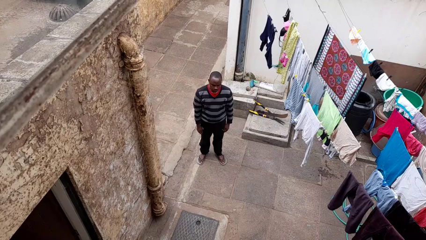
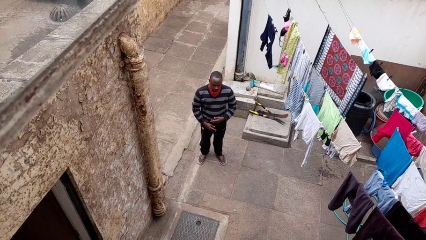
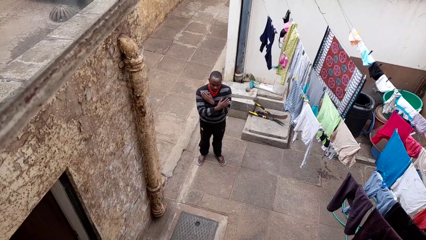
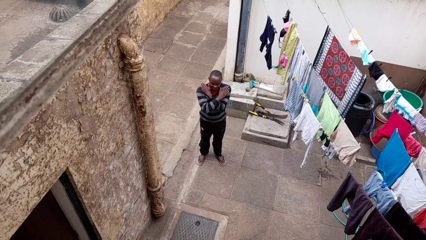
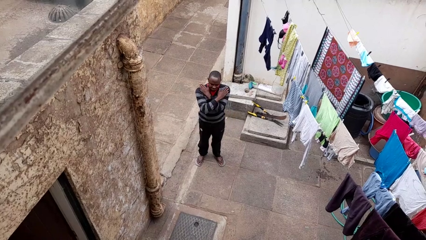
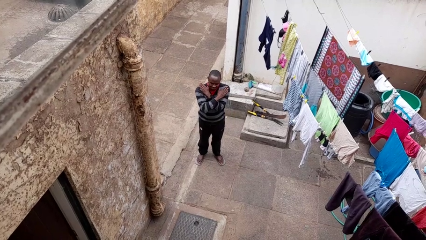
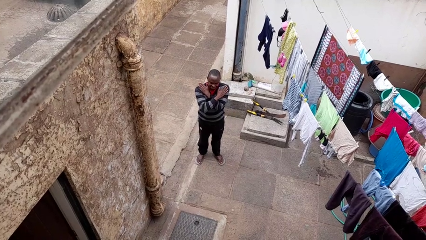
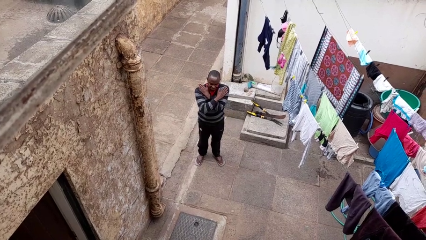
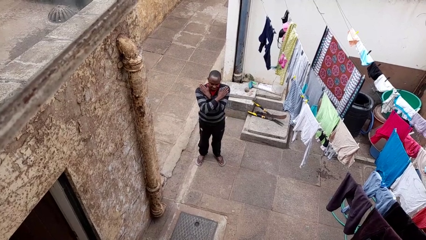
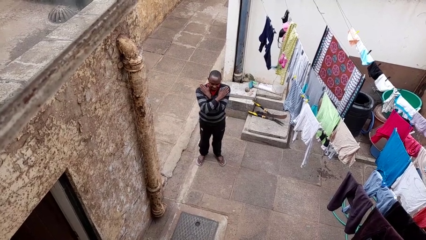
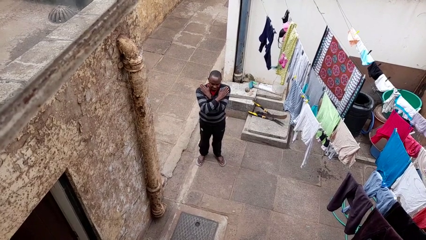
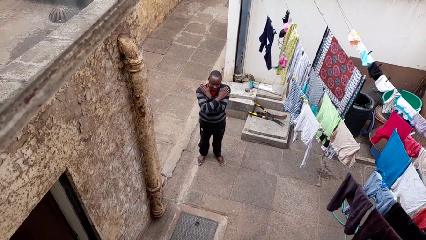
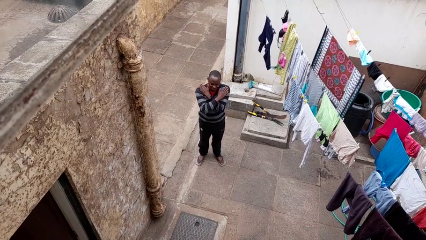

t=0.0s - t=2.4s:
person gestures arms x

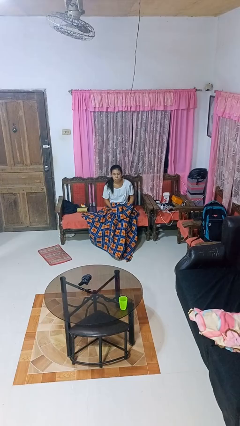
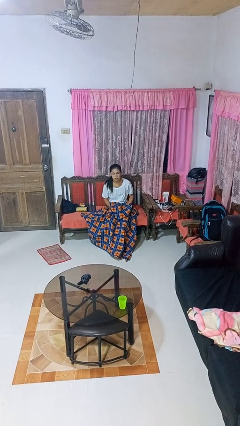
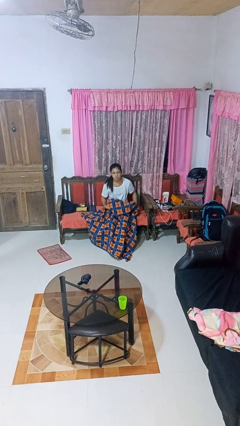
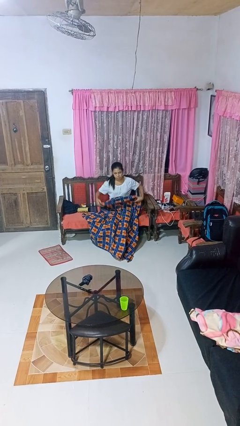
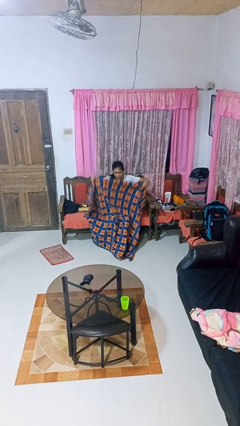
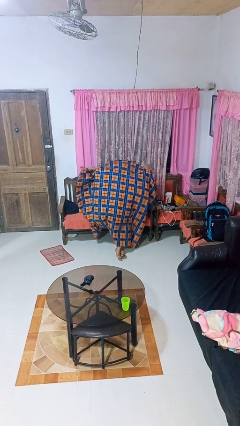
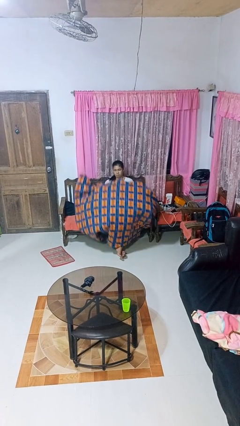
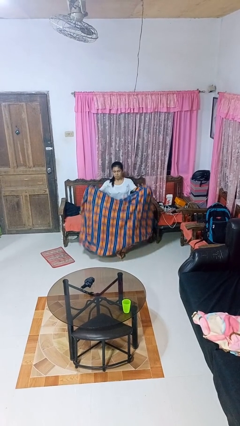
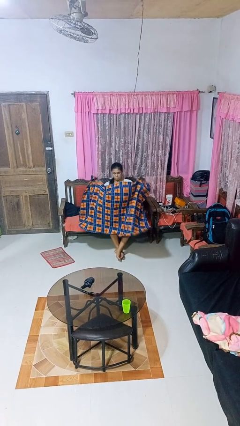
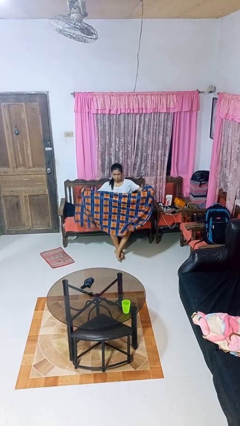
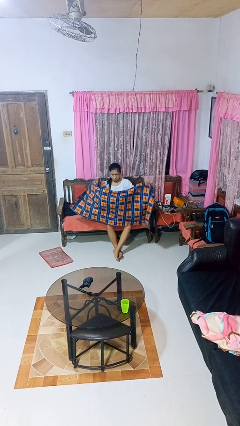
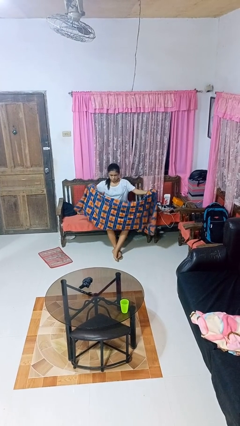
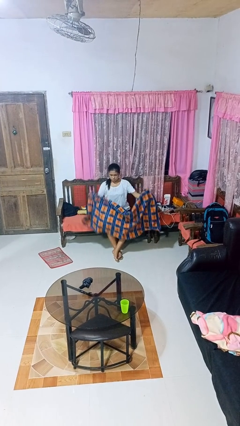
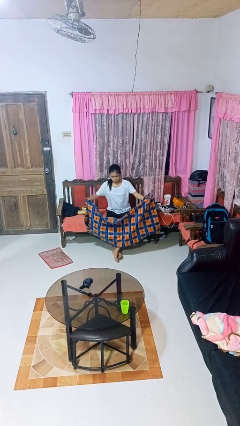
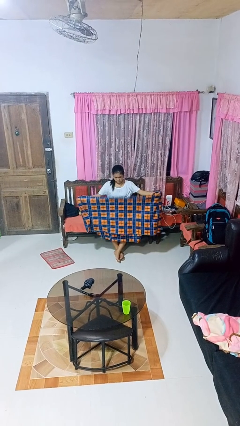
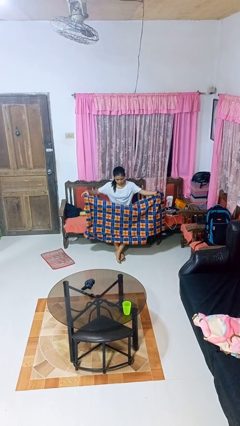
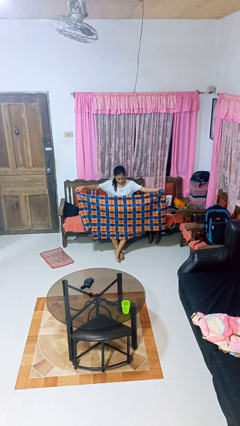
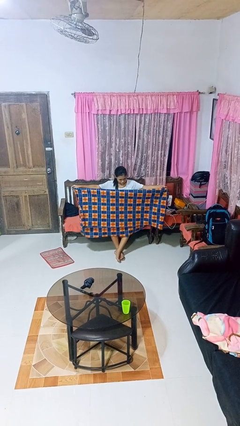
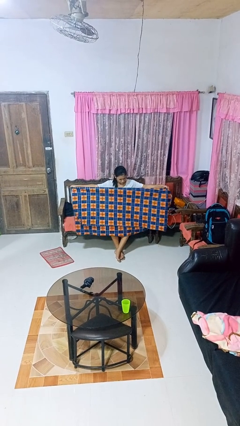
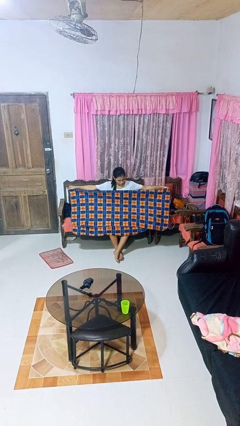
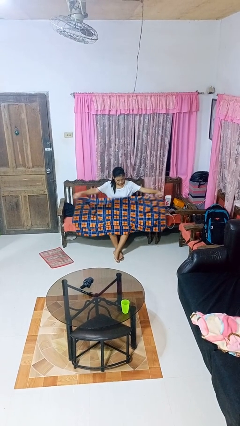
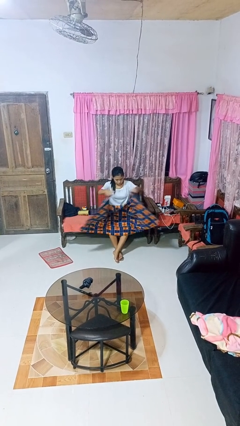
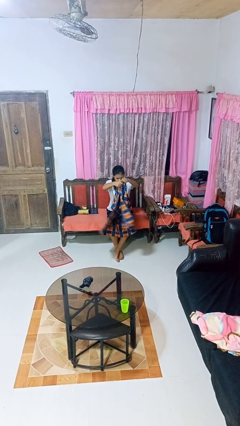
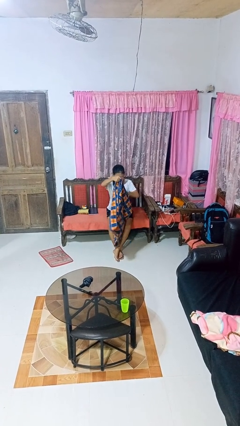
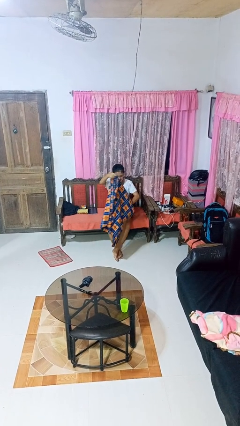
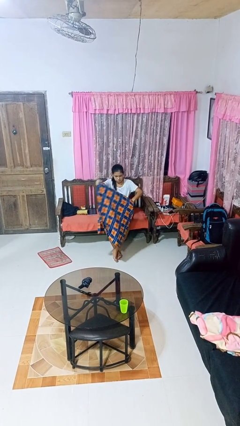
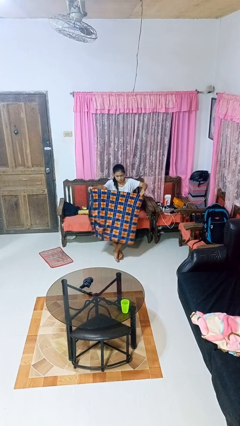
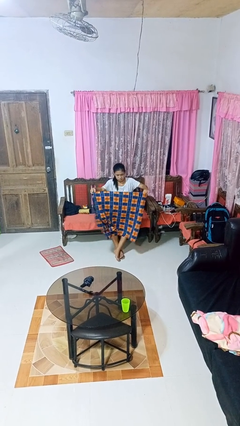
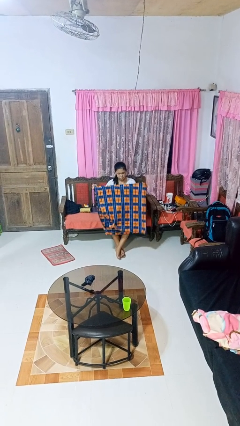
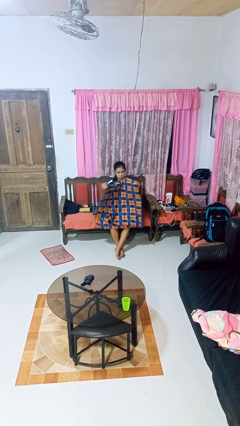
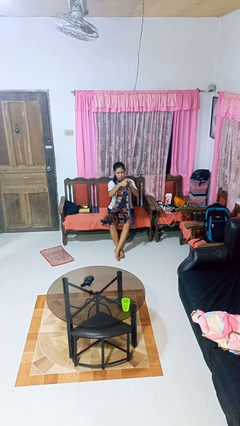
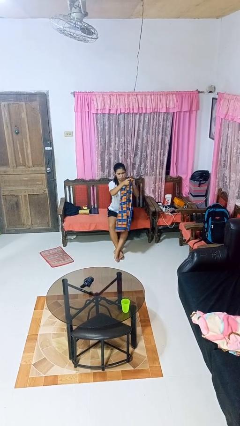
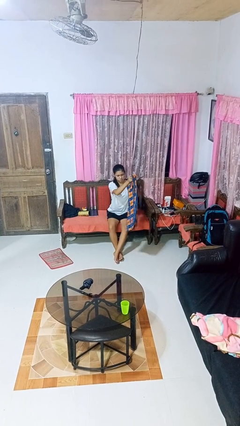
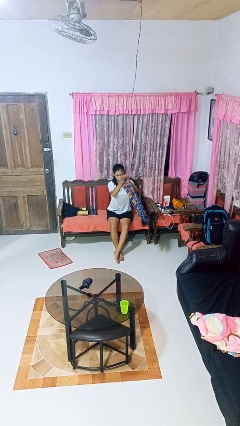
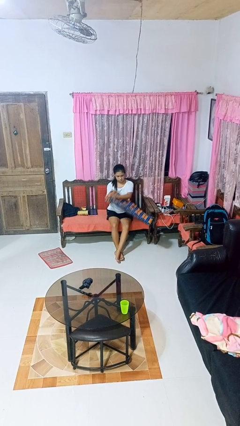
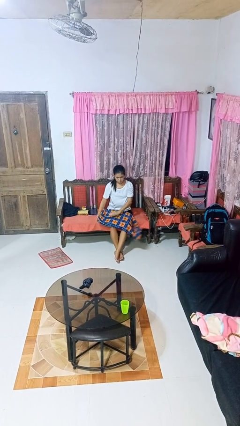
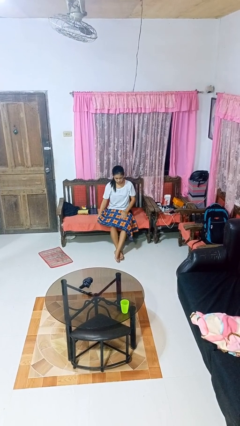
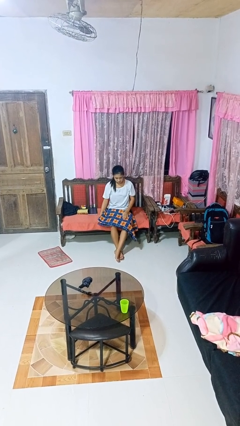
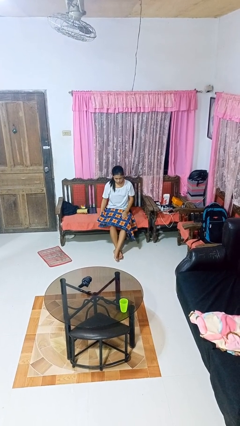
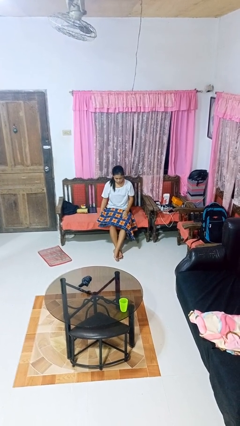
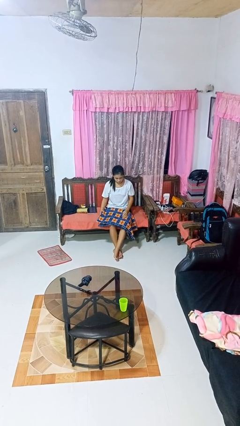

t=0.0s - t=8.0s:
person folds blanket

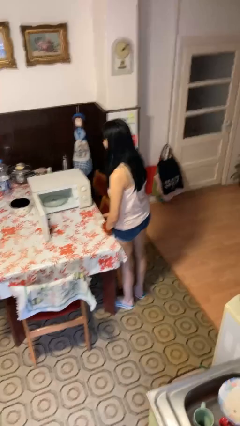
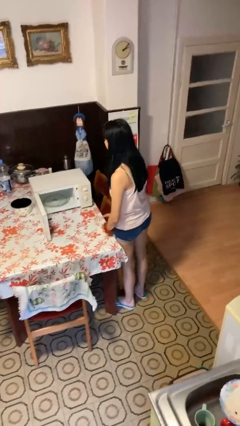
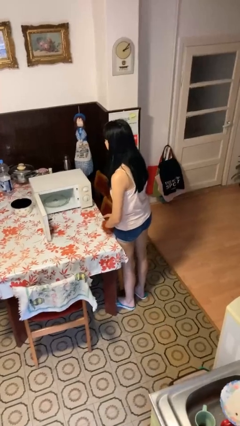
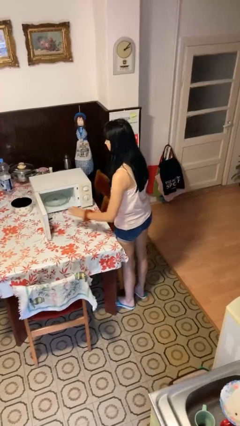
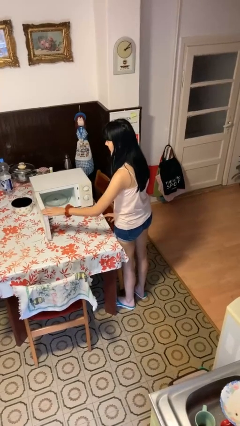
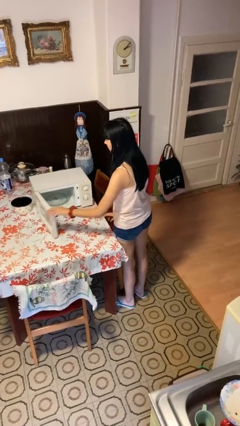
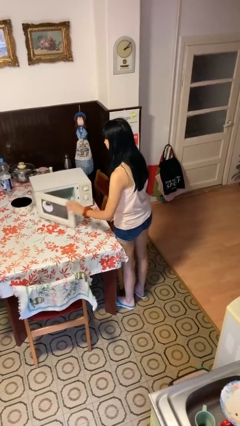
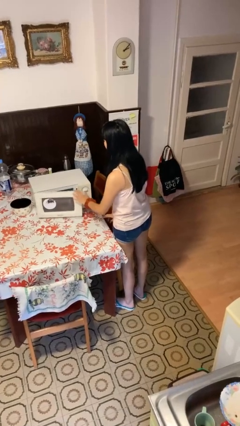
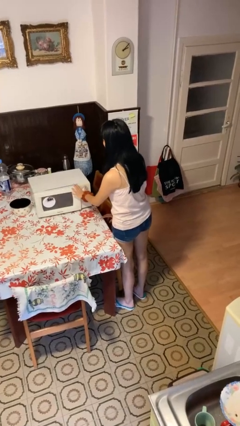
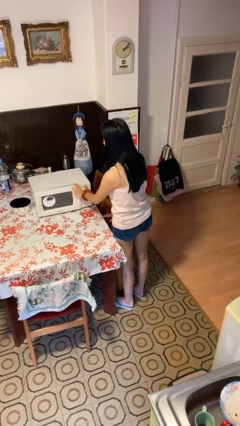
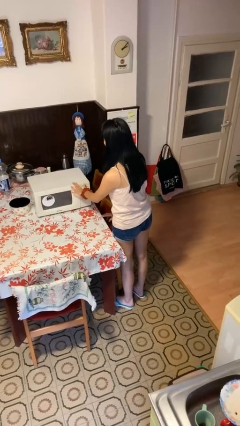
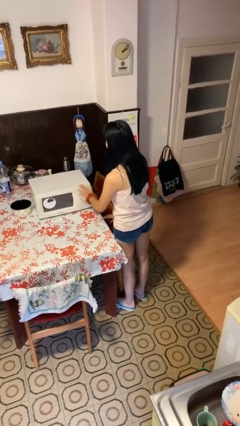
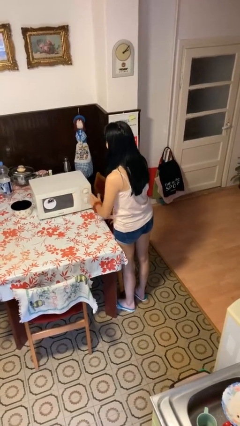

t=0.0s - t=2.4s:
person closes microwave

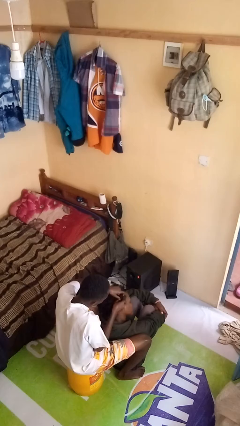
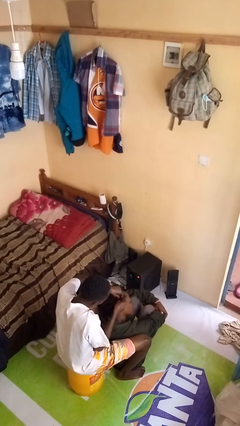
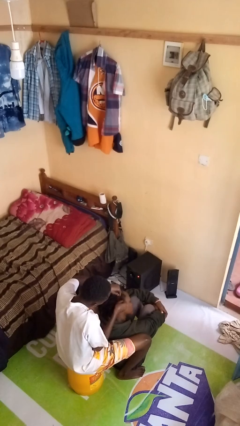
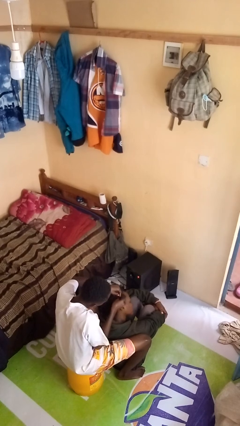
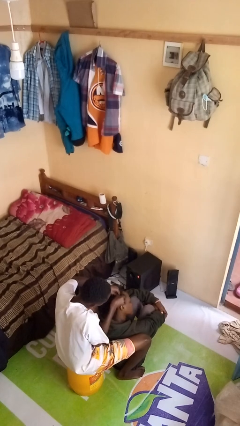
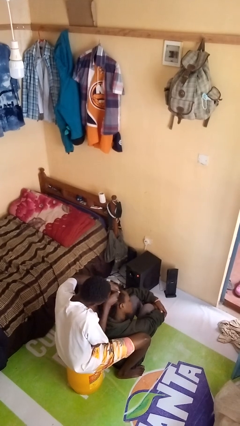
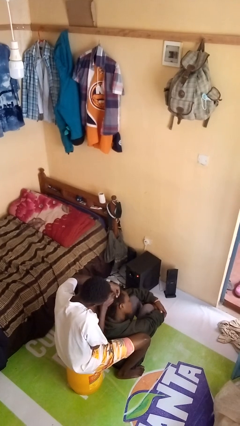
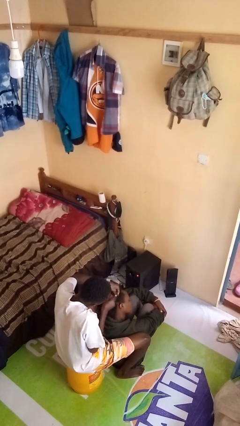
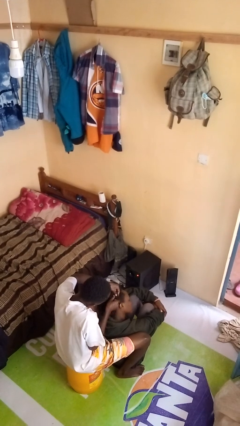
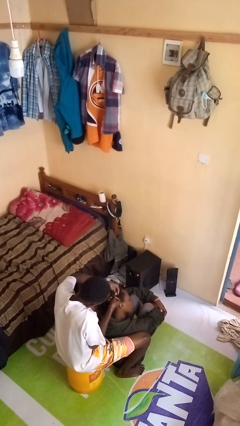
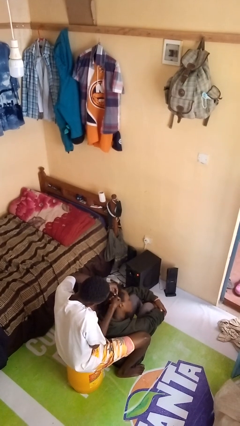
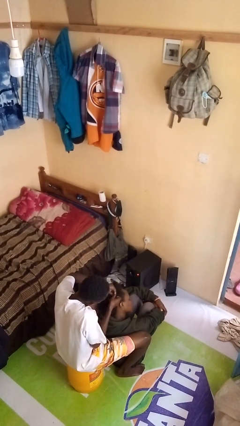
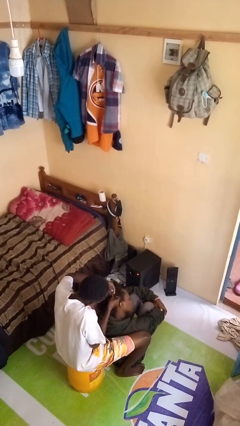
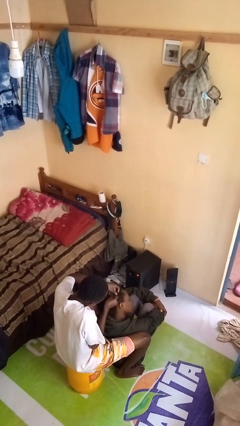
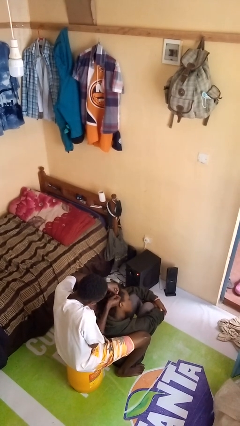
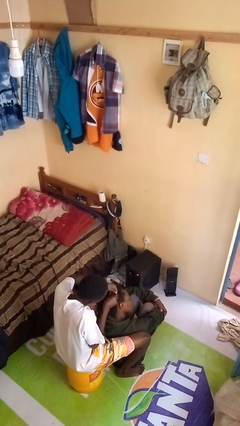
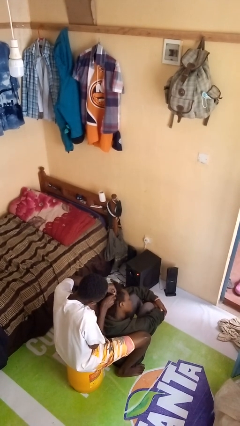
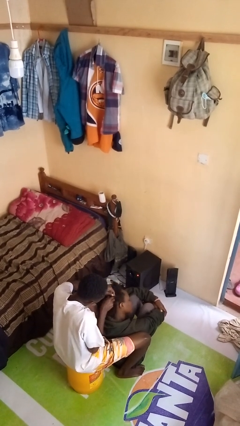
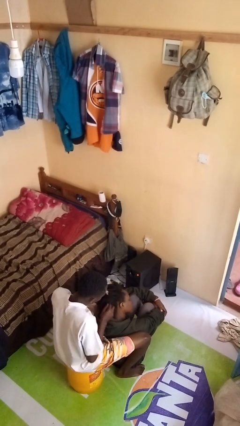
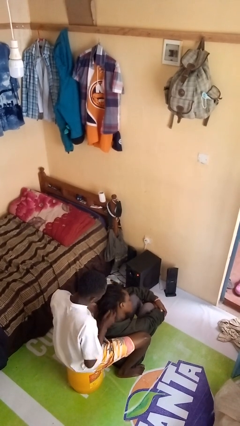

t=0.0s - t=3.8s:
person braids hair of person

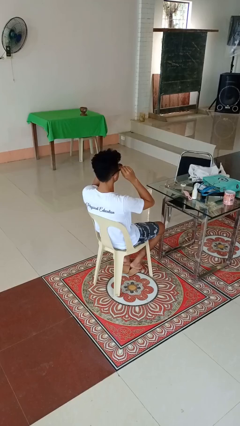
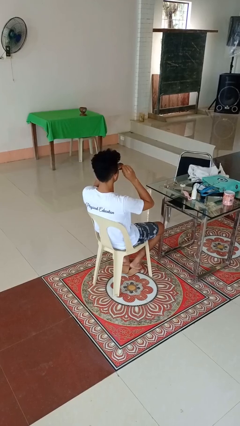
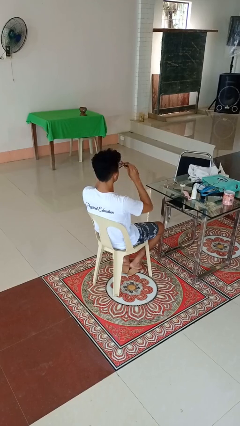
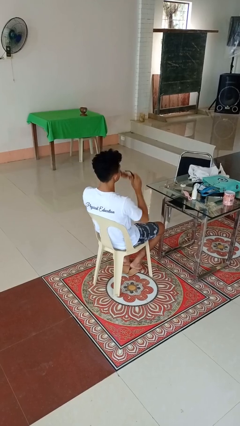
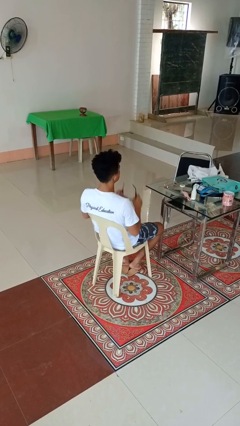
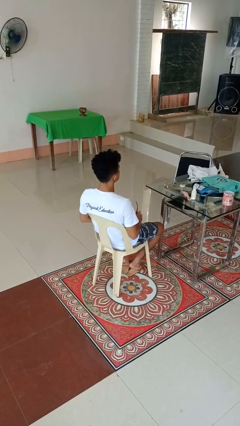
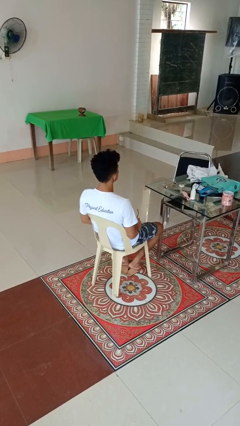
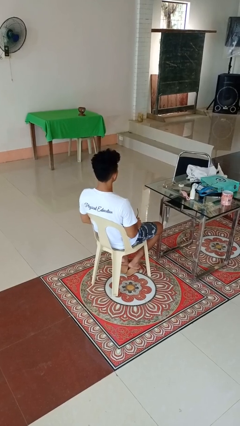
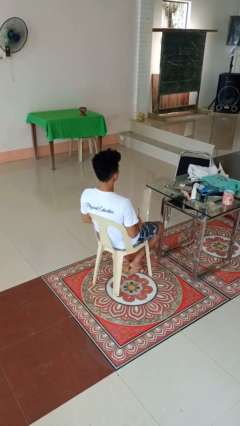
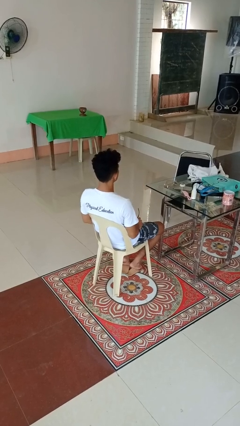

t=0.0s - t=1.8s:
person takes off sunglasses
